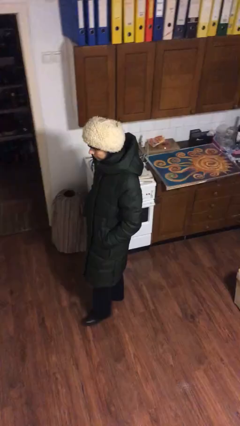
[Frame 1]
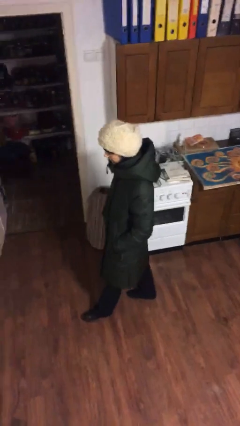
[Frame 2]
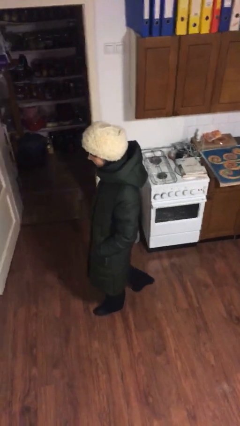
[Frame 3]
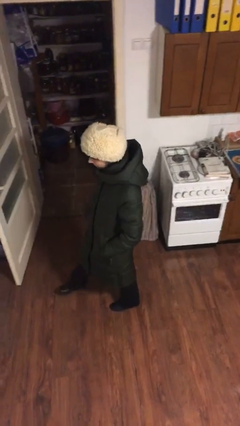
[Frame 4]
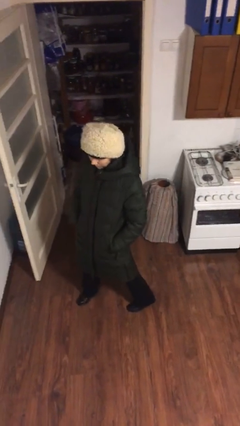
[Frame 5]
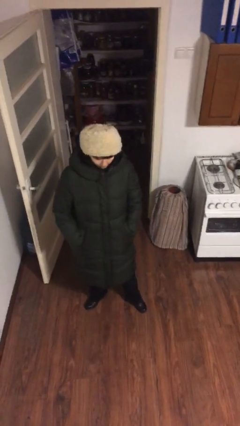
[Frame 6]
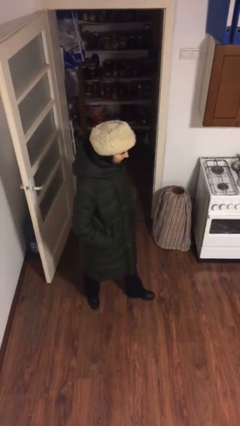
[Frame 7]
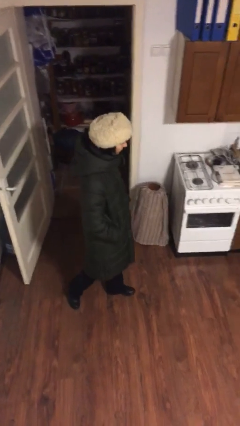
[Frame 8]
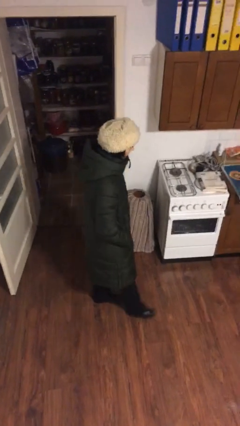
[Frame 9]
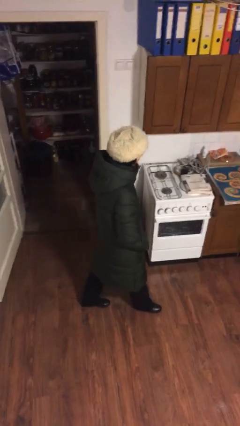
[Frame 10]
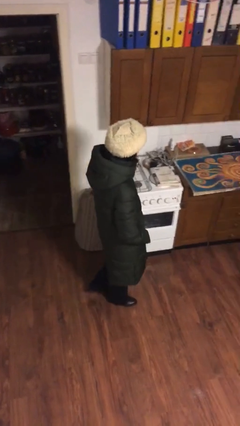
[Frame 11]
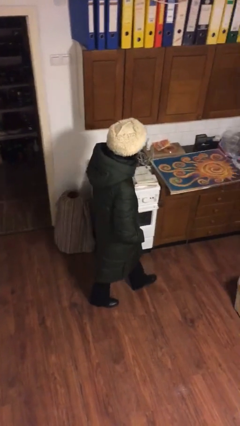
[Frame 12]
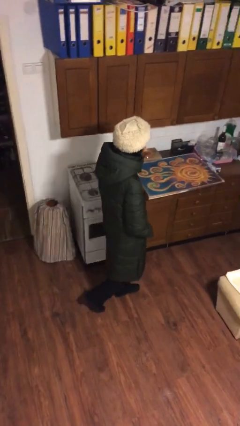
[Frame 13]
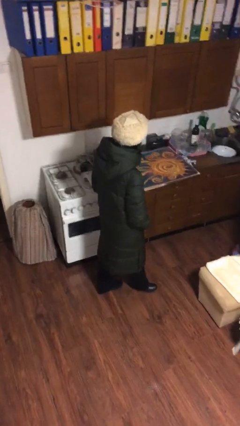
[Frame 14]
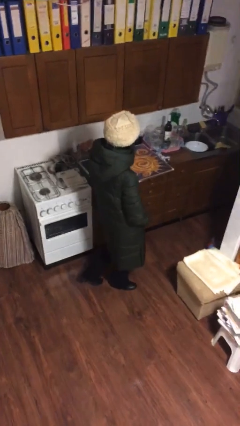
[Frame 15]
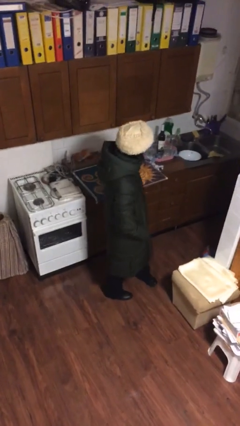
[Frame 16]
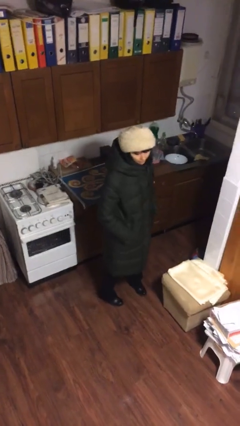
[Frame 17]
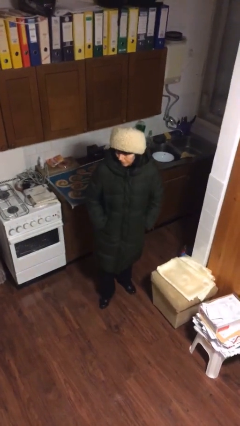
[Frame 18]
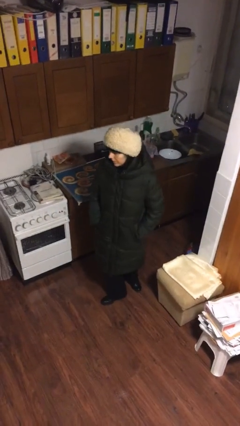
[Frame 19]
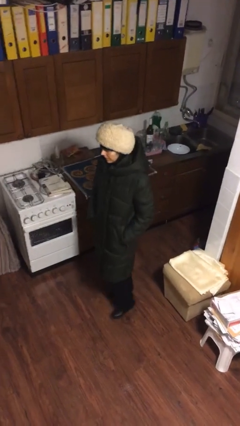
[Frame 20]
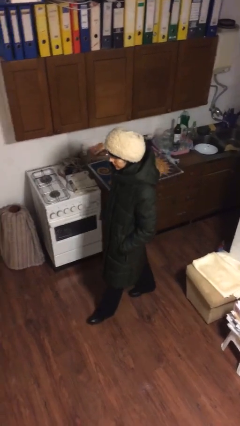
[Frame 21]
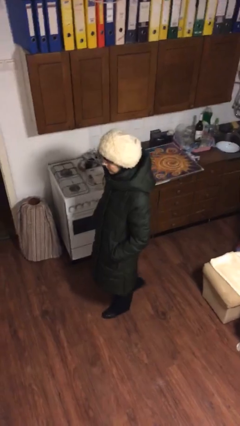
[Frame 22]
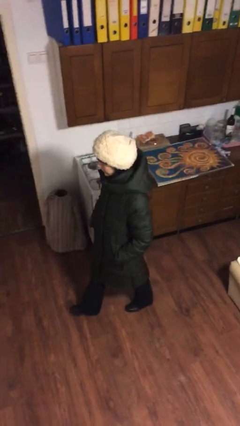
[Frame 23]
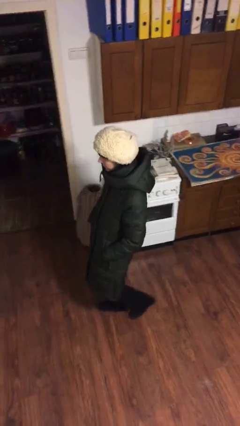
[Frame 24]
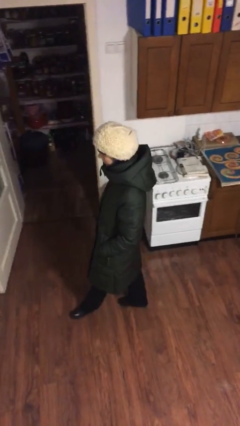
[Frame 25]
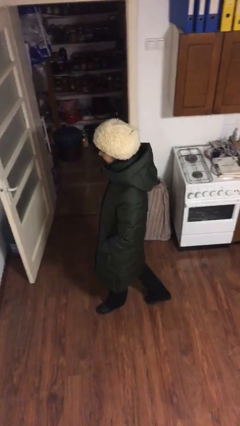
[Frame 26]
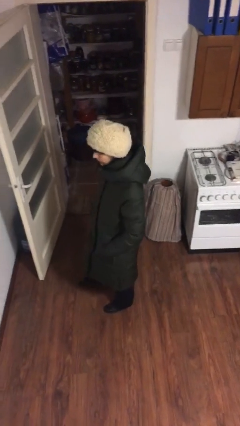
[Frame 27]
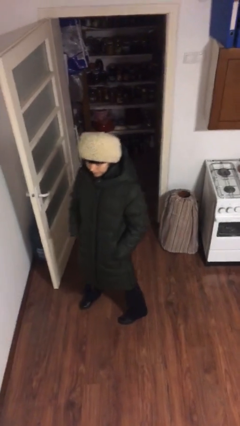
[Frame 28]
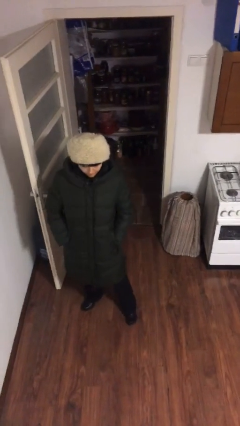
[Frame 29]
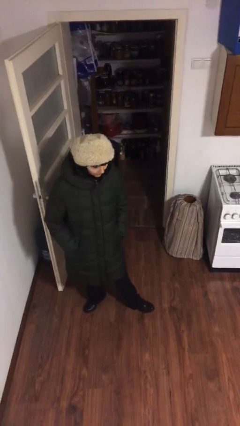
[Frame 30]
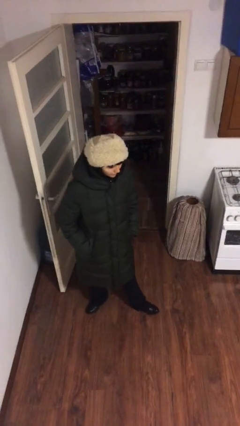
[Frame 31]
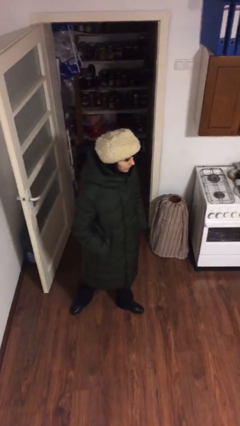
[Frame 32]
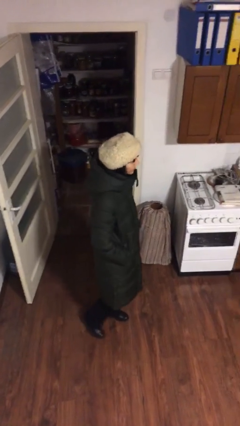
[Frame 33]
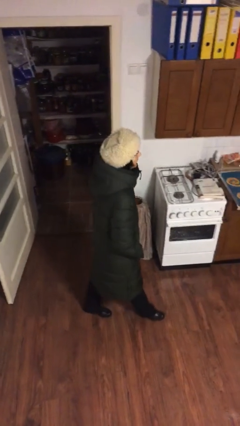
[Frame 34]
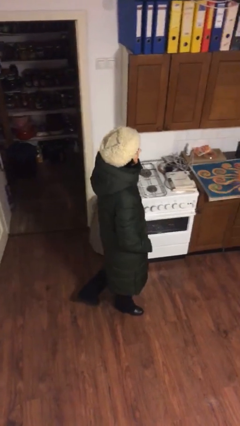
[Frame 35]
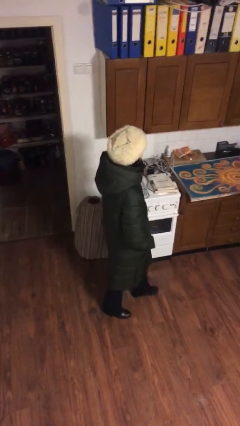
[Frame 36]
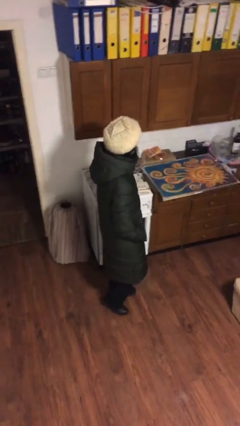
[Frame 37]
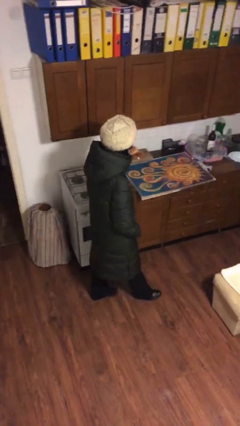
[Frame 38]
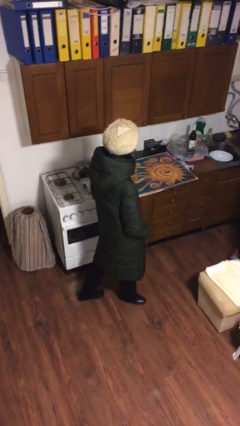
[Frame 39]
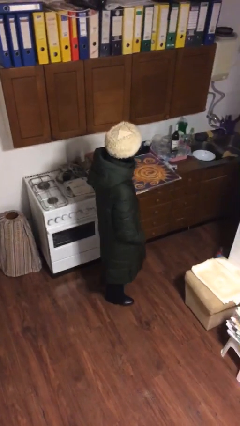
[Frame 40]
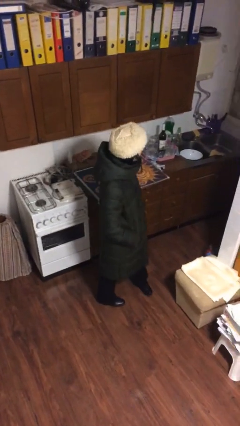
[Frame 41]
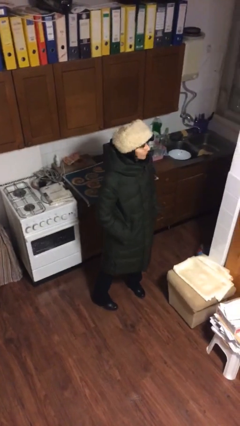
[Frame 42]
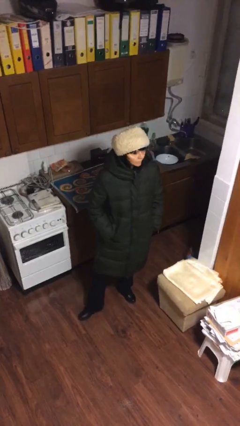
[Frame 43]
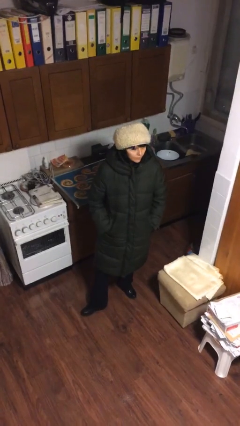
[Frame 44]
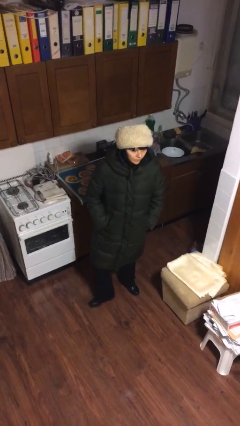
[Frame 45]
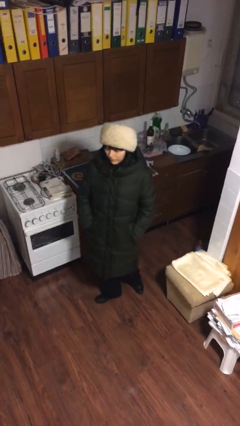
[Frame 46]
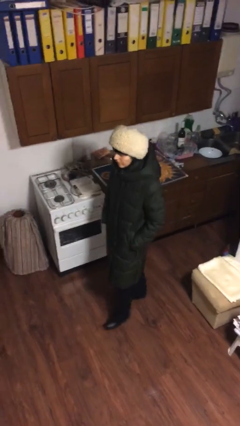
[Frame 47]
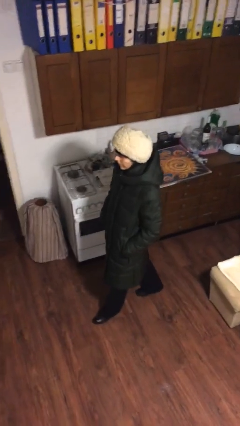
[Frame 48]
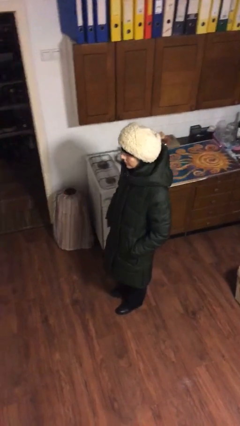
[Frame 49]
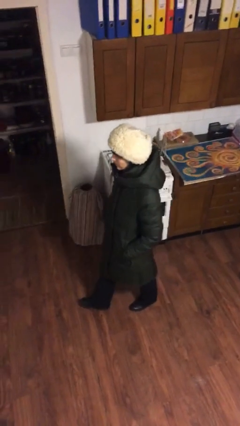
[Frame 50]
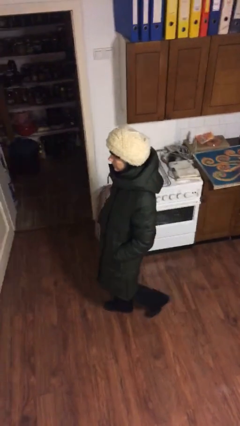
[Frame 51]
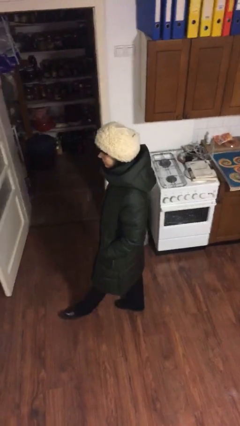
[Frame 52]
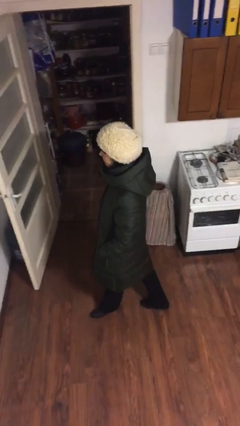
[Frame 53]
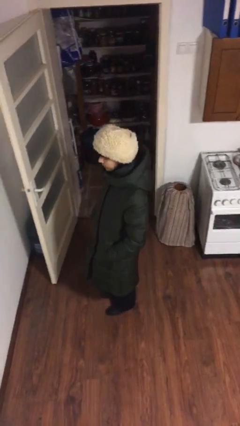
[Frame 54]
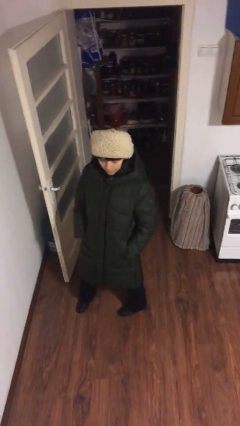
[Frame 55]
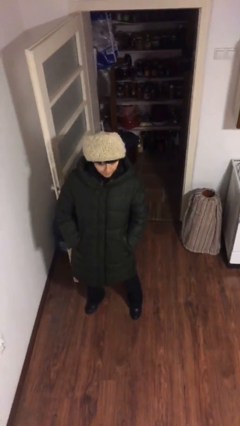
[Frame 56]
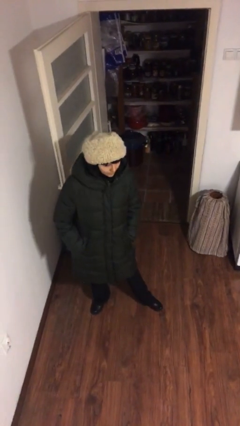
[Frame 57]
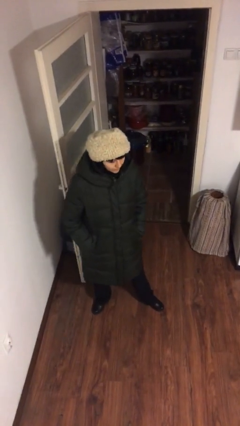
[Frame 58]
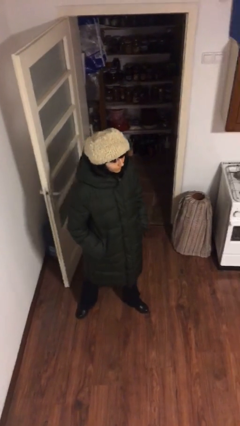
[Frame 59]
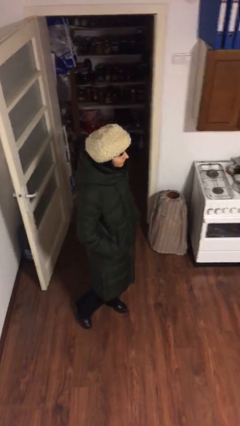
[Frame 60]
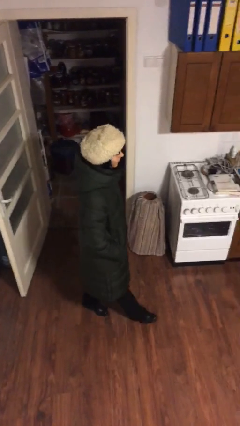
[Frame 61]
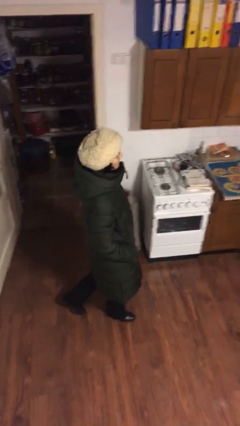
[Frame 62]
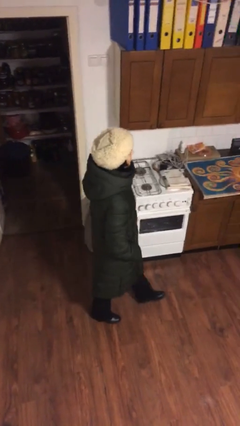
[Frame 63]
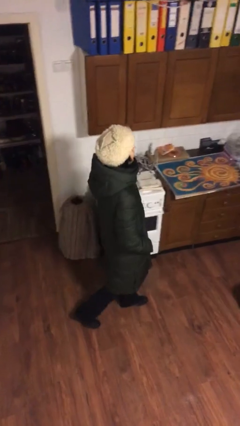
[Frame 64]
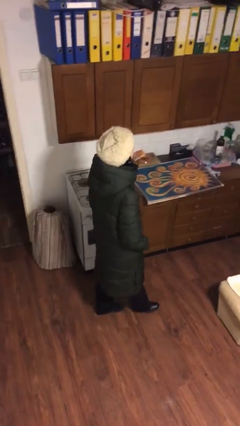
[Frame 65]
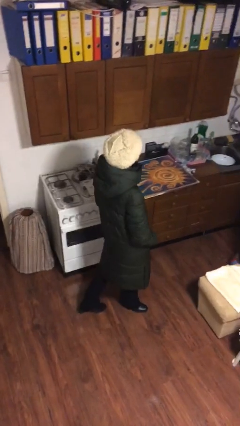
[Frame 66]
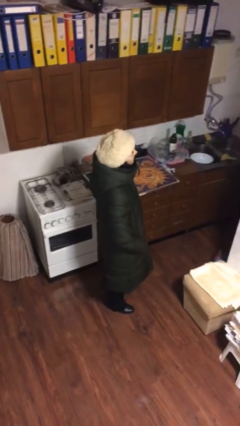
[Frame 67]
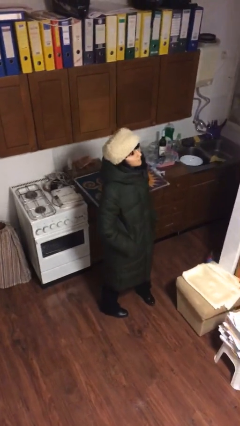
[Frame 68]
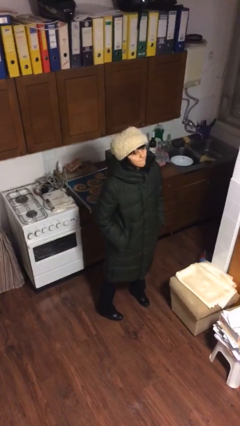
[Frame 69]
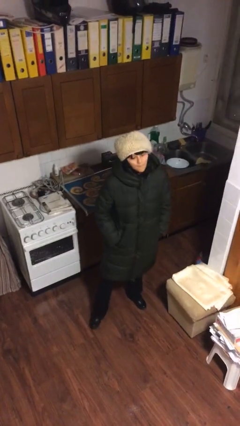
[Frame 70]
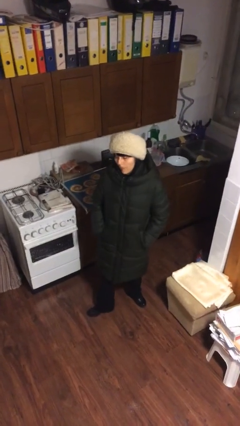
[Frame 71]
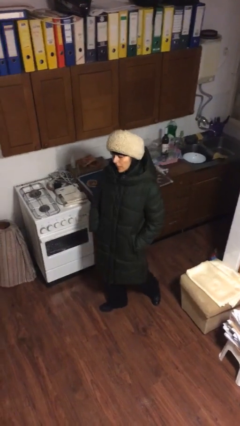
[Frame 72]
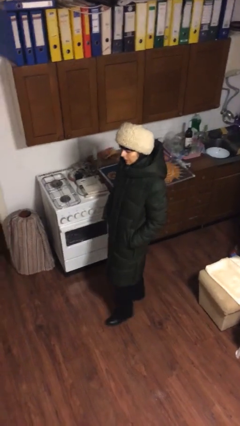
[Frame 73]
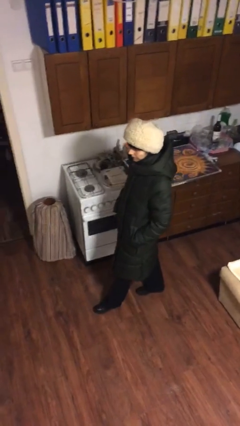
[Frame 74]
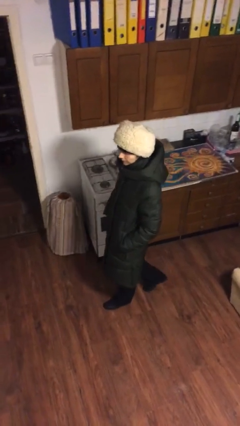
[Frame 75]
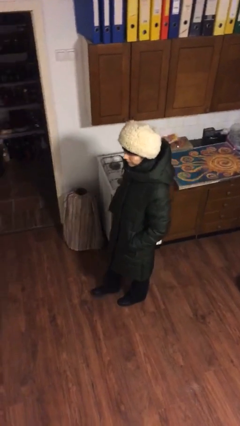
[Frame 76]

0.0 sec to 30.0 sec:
person walks

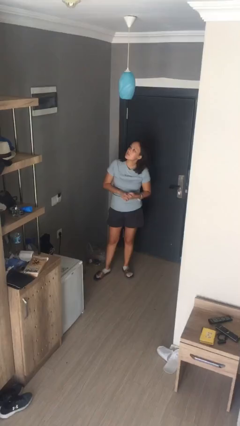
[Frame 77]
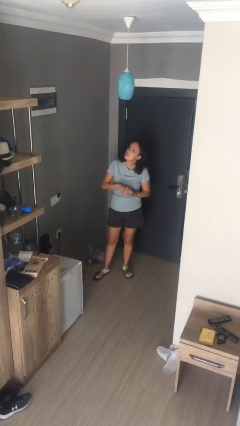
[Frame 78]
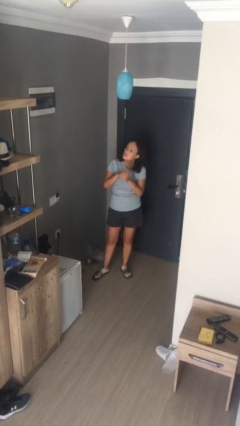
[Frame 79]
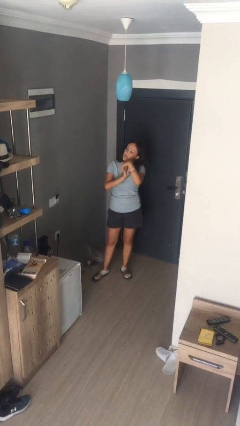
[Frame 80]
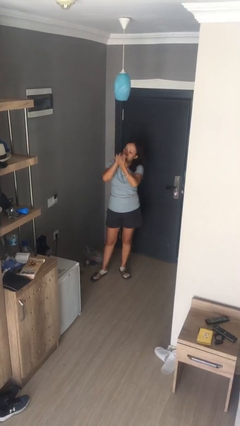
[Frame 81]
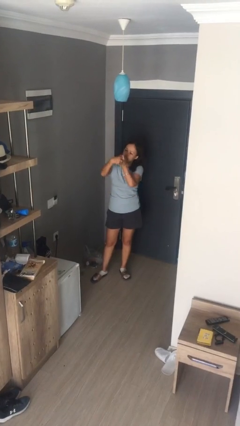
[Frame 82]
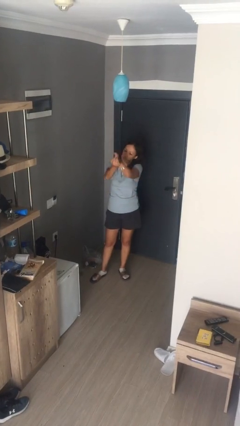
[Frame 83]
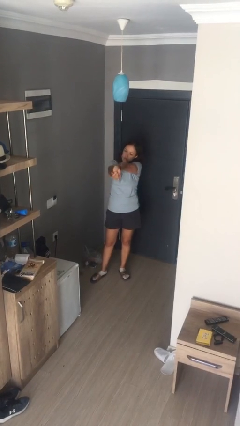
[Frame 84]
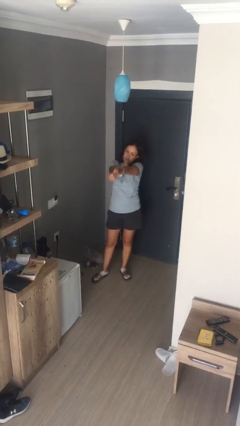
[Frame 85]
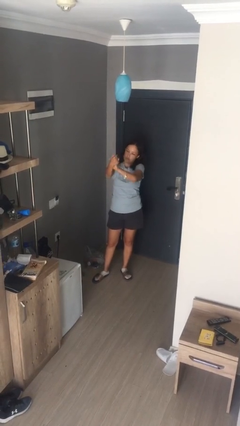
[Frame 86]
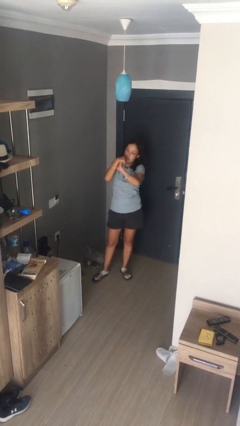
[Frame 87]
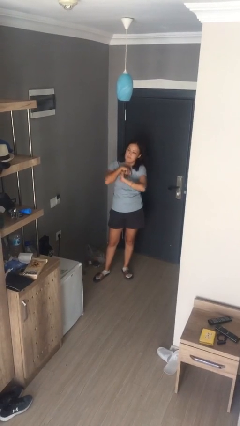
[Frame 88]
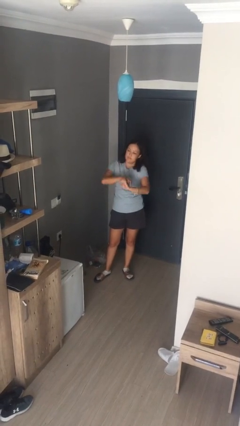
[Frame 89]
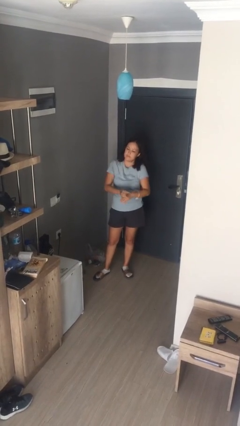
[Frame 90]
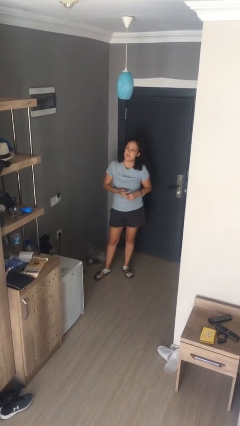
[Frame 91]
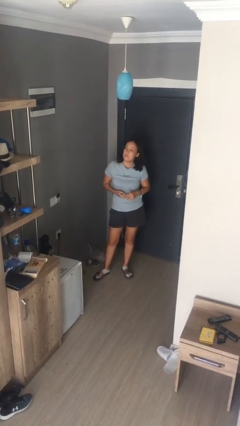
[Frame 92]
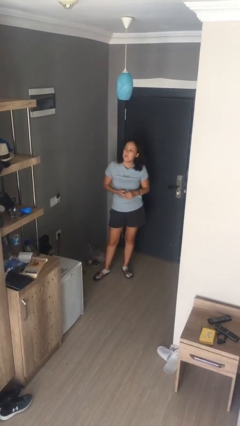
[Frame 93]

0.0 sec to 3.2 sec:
person cracks knuckles

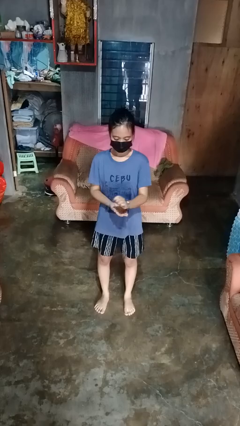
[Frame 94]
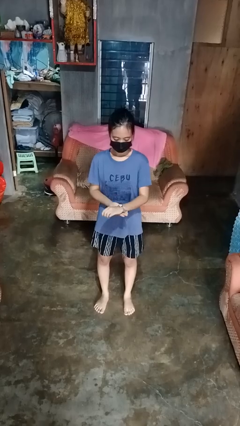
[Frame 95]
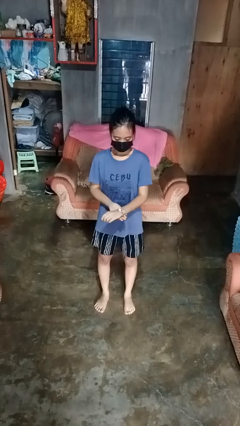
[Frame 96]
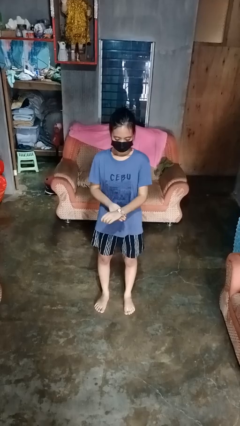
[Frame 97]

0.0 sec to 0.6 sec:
person puts on wristwatch
